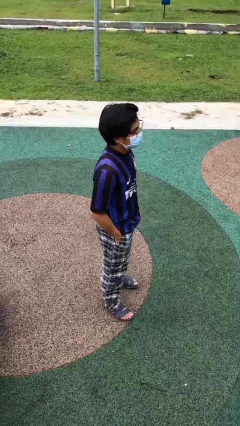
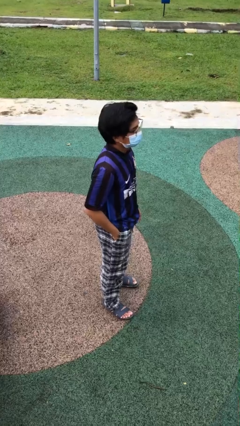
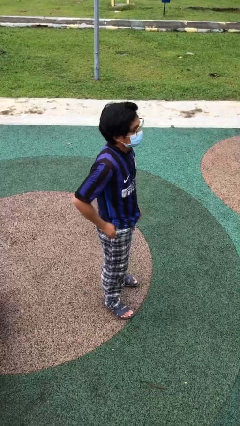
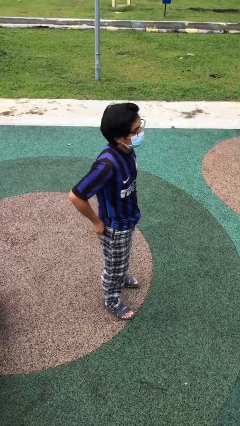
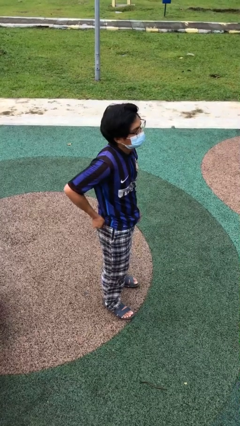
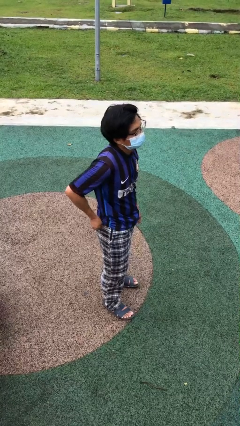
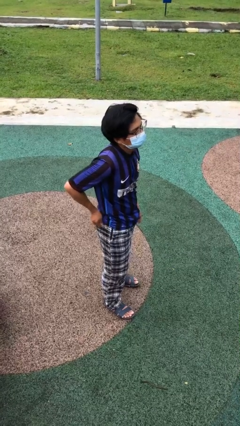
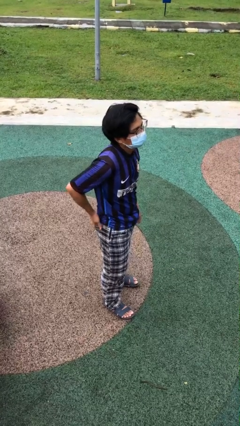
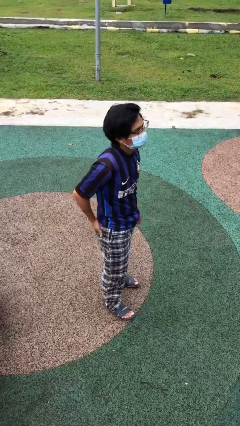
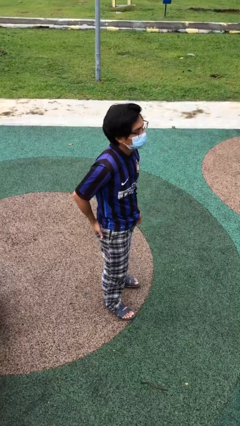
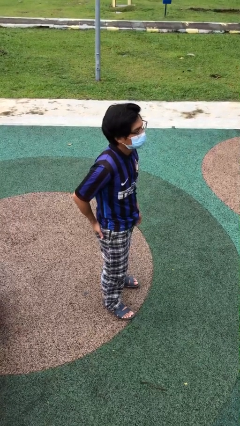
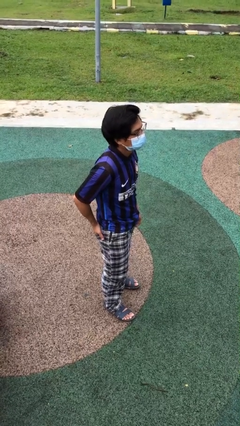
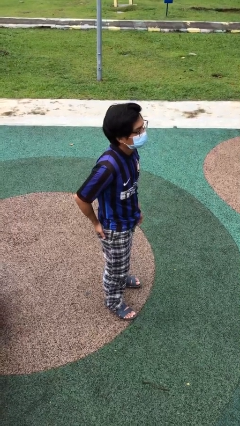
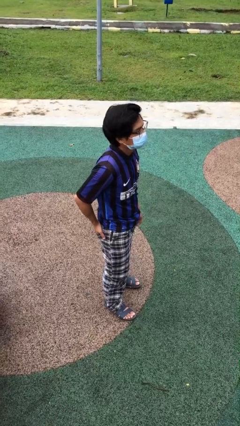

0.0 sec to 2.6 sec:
person puts hands in back pockets

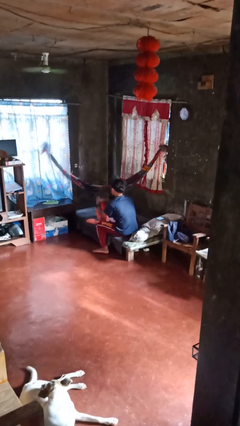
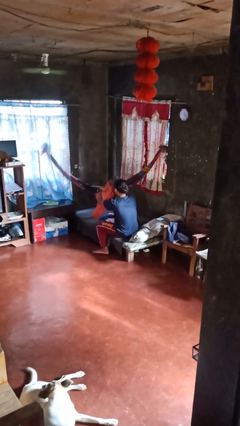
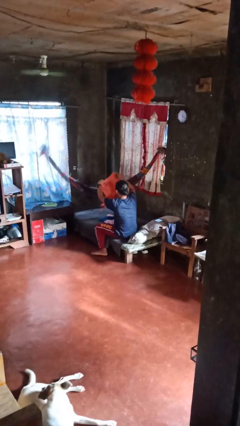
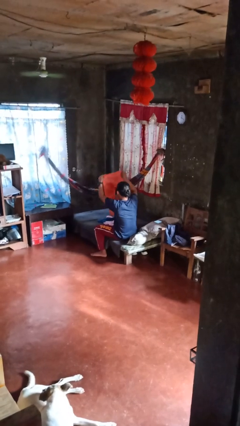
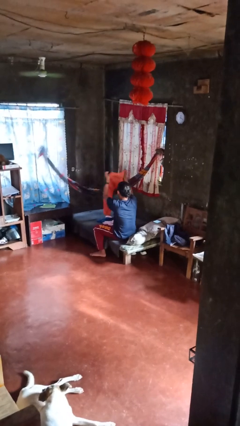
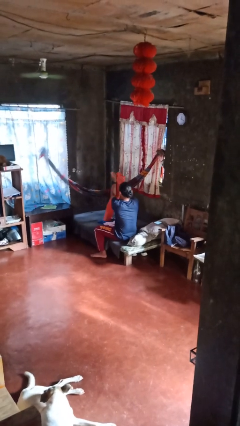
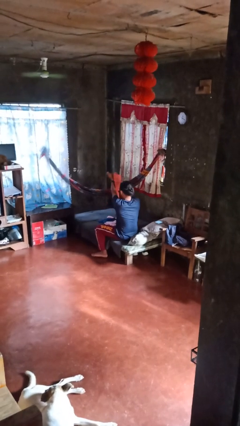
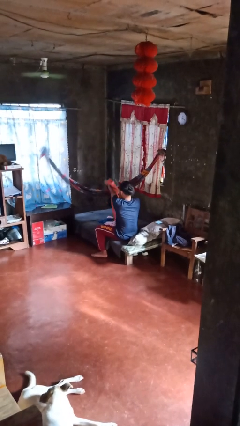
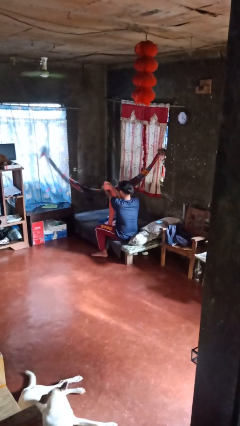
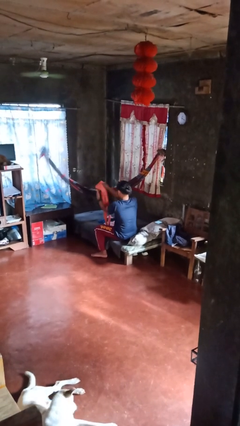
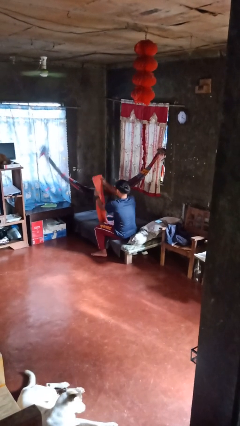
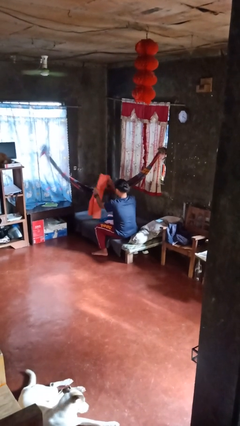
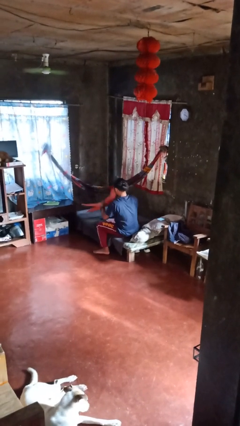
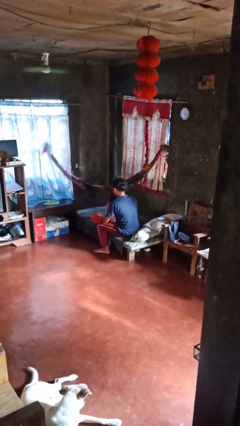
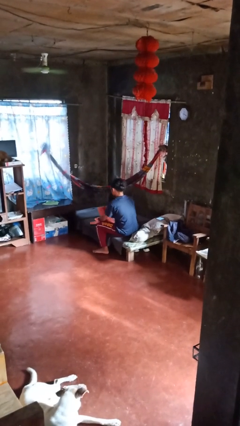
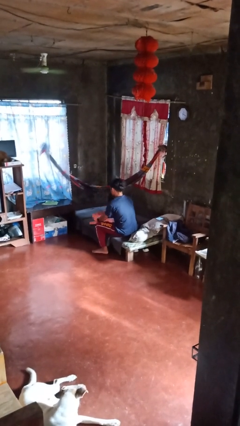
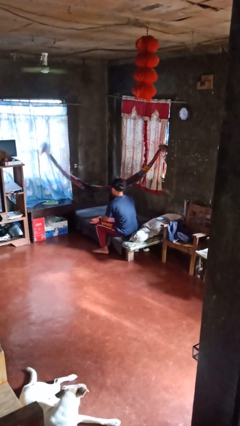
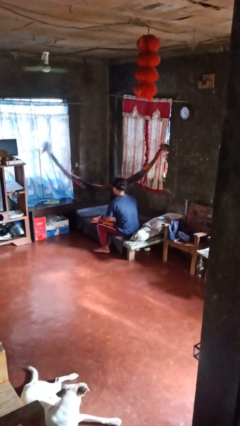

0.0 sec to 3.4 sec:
person folds pants

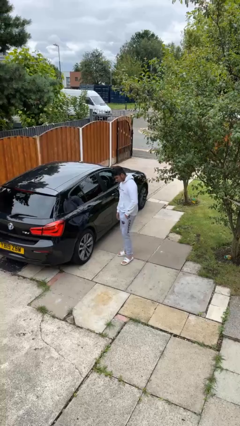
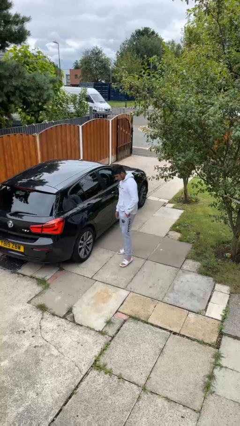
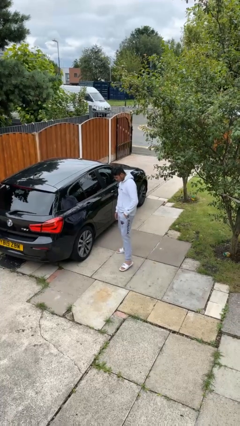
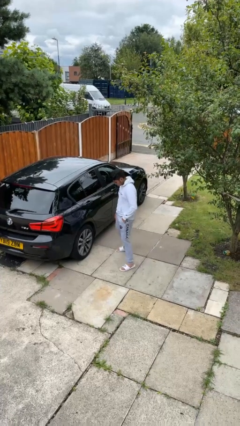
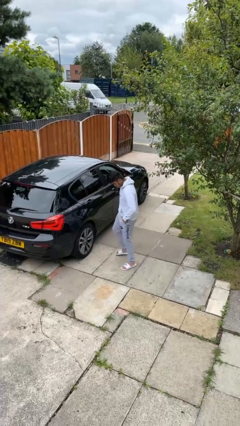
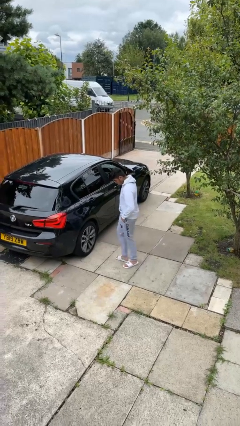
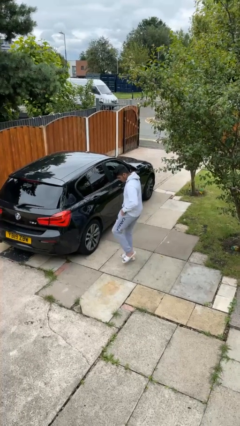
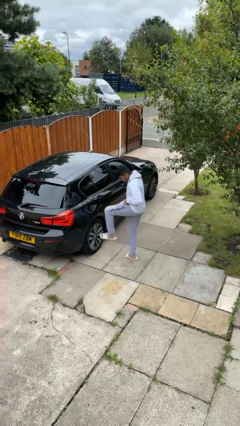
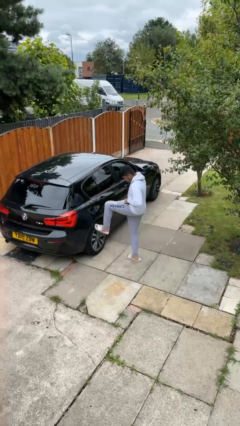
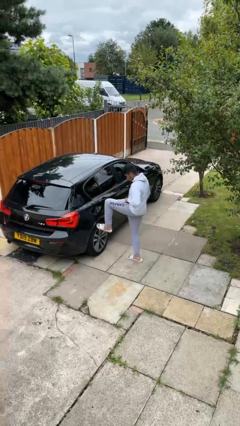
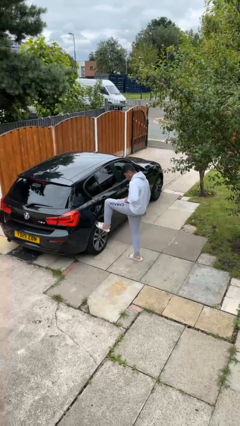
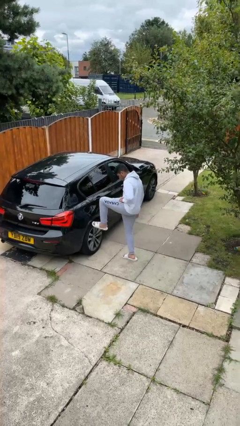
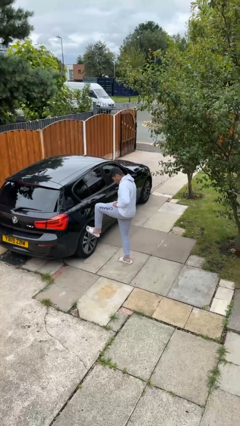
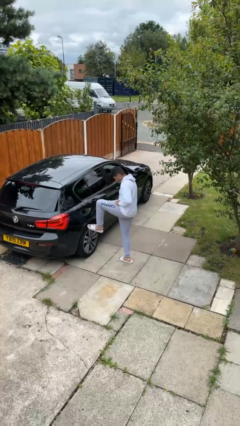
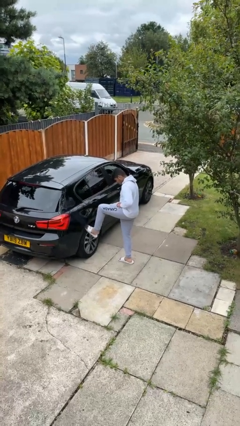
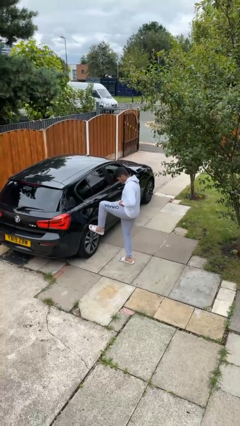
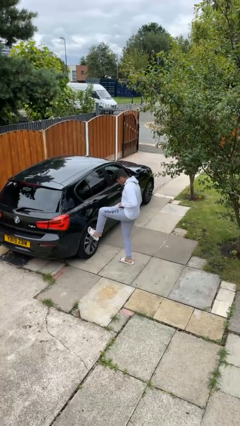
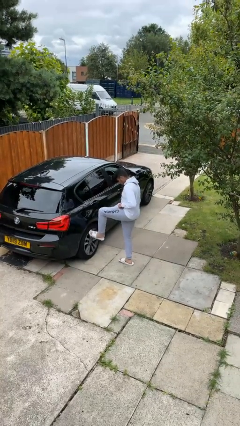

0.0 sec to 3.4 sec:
person kicks car tires

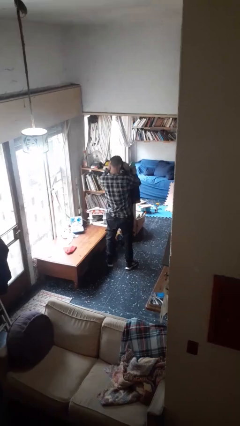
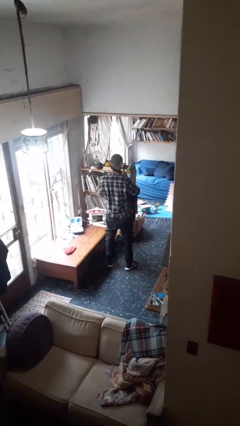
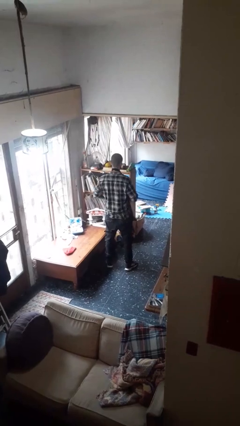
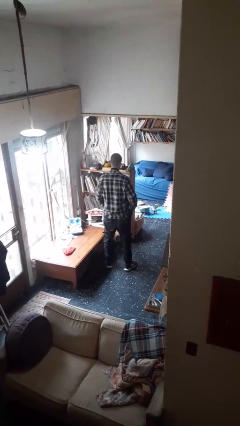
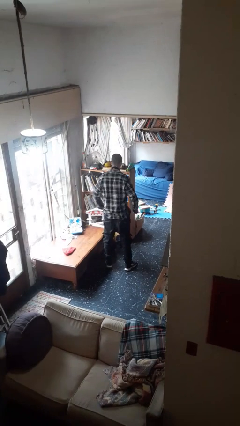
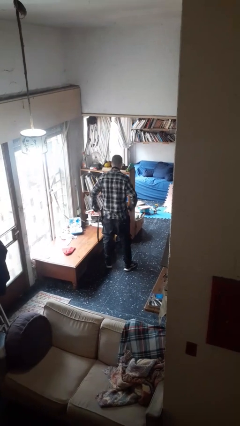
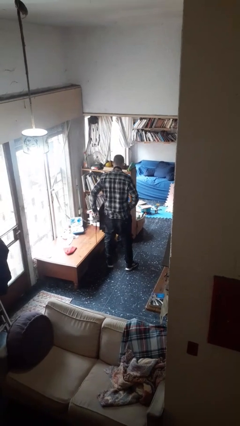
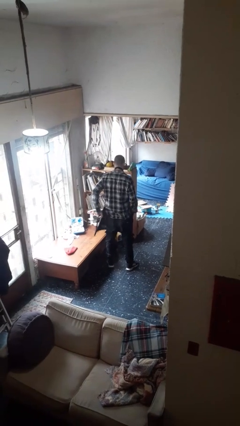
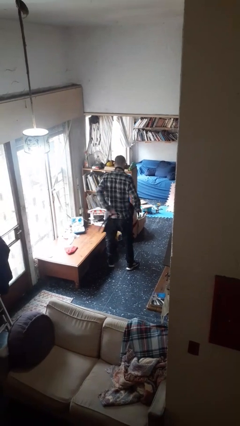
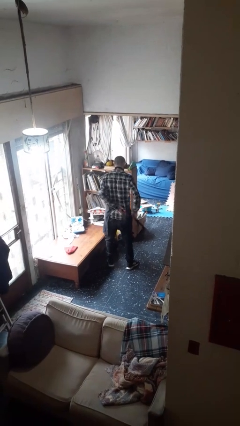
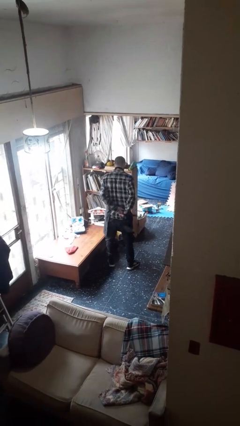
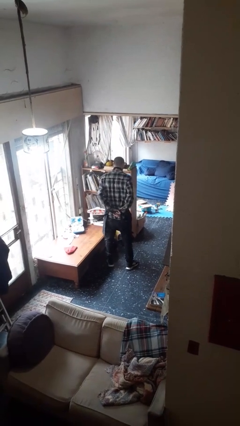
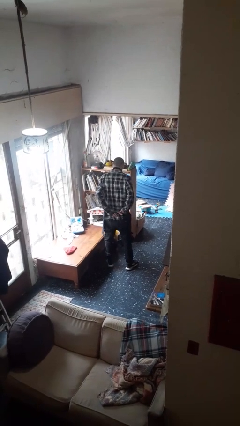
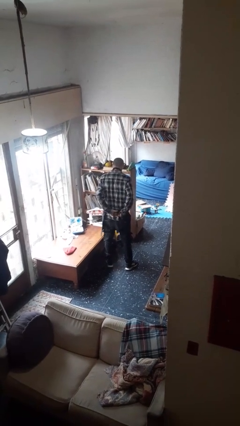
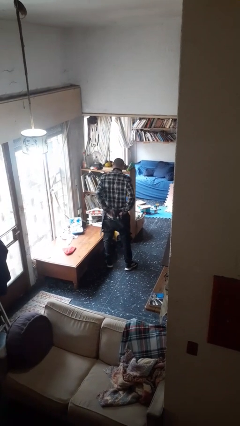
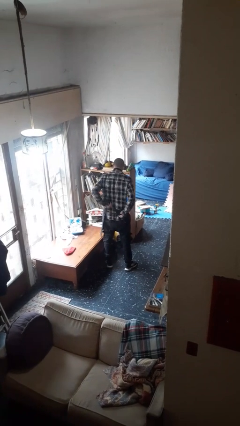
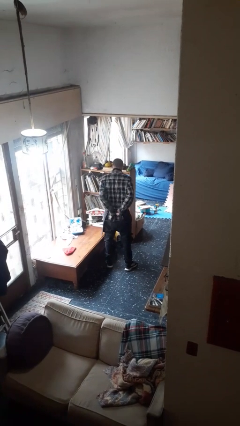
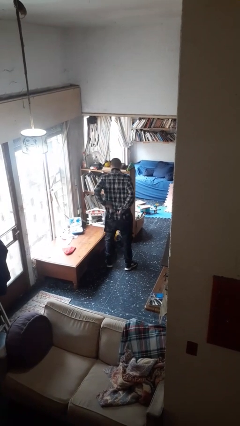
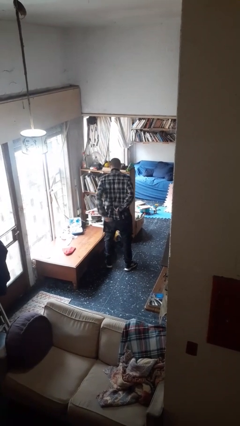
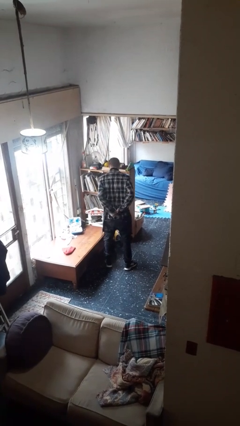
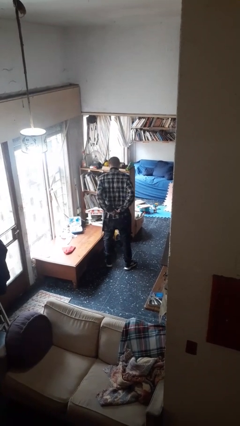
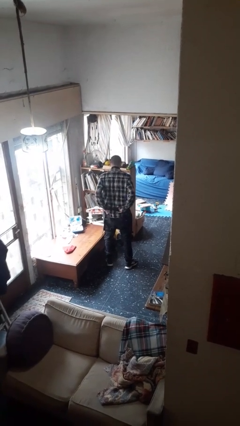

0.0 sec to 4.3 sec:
person puts on apron

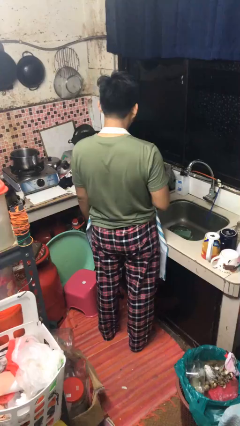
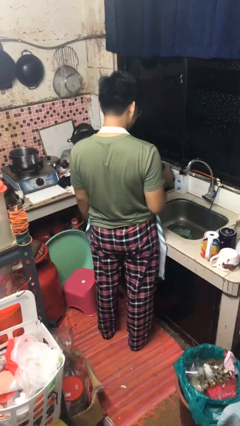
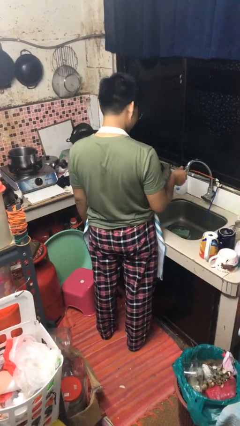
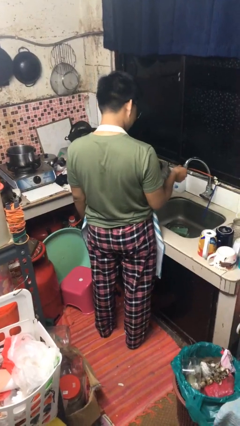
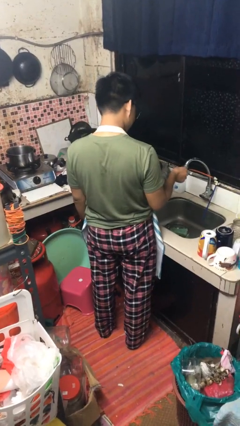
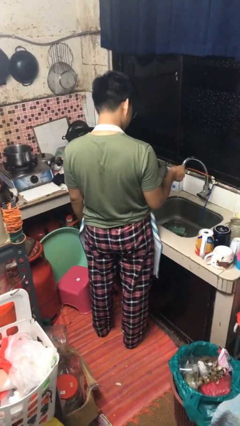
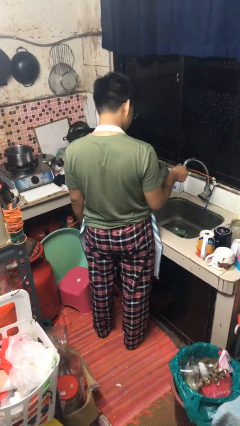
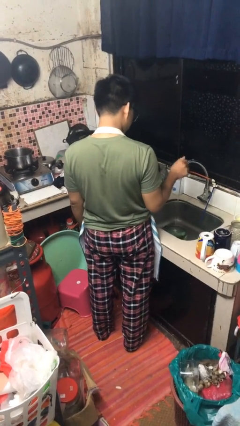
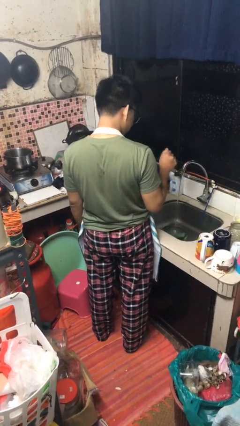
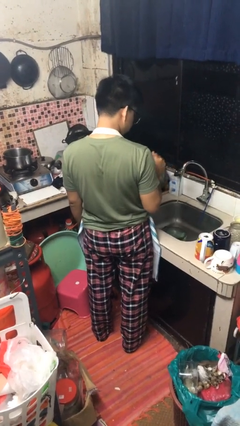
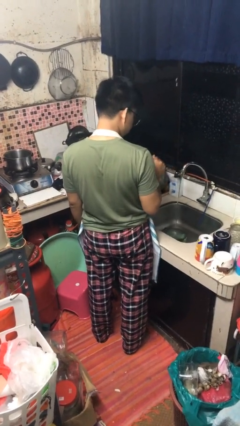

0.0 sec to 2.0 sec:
person turns on faucet

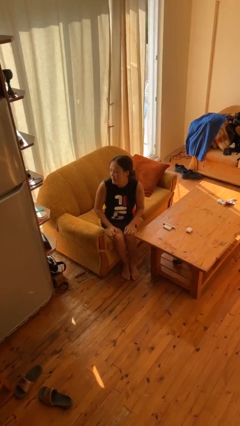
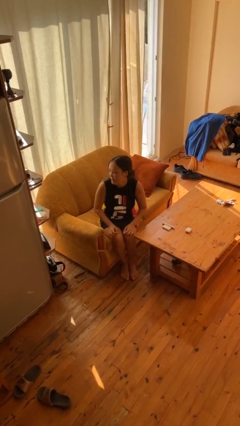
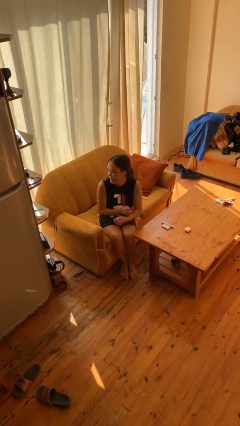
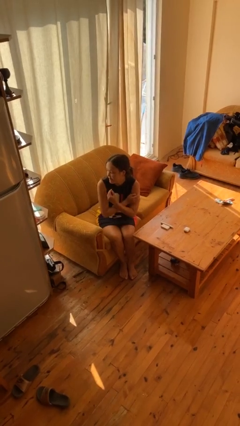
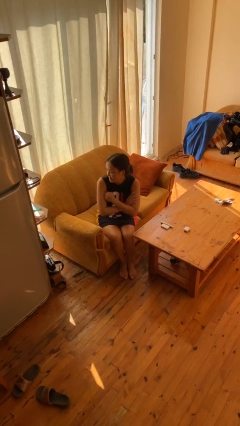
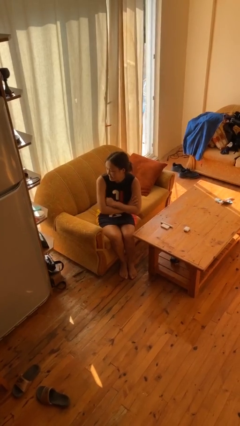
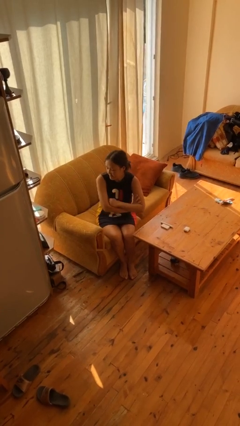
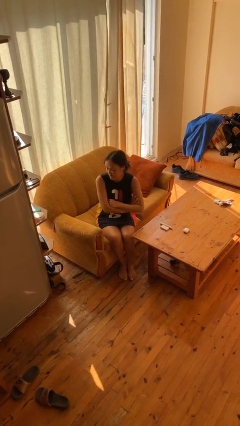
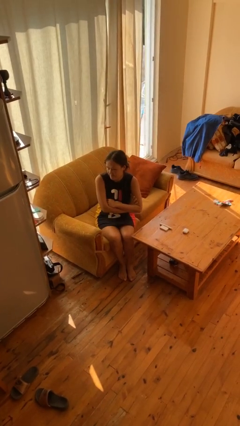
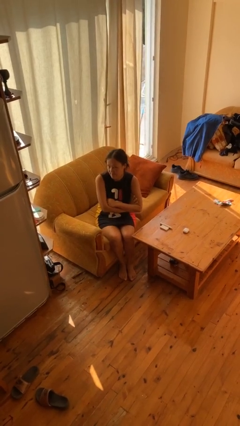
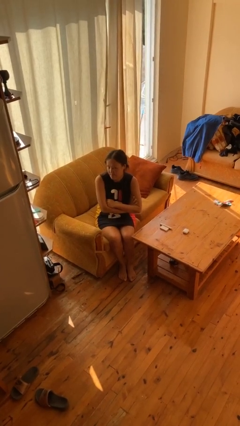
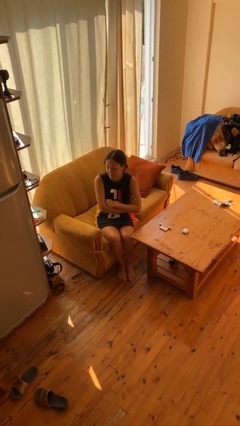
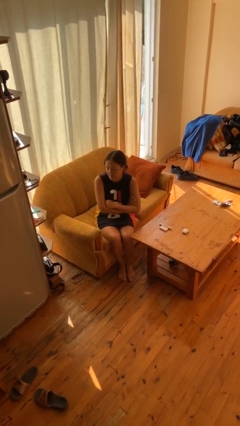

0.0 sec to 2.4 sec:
person crosses arms
